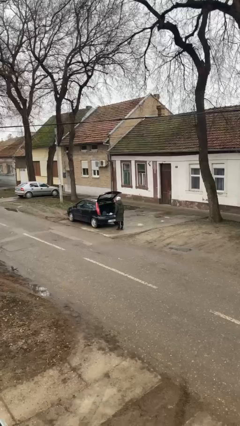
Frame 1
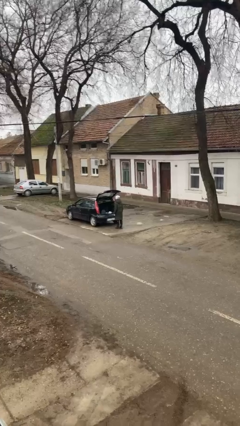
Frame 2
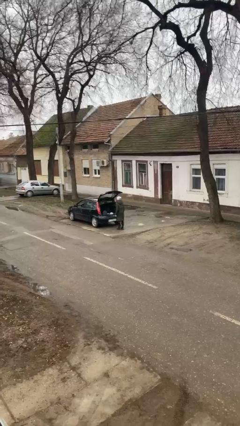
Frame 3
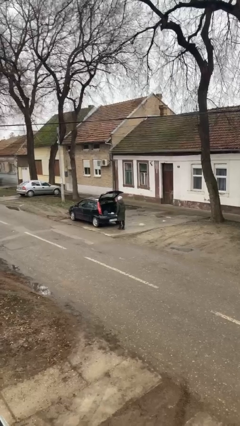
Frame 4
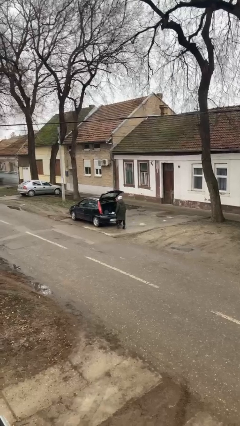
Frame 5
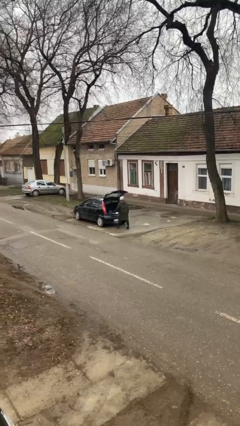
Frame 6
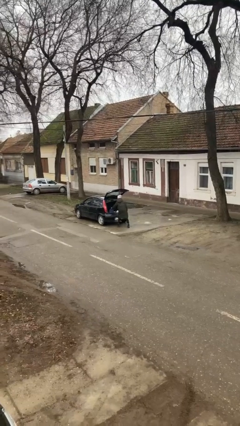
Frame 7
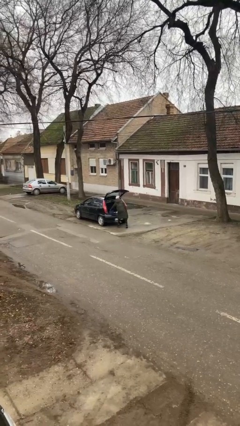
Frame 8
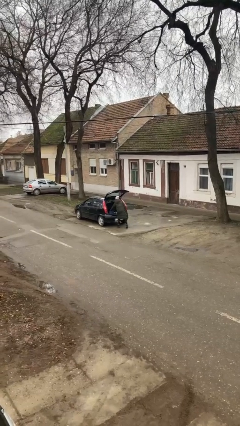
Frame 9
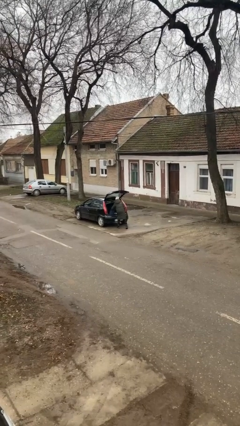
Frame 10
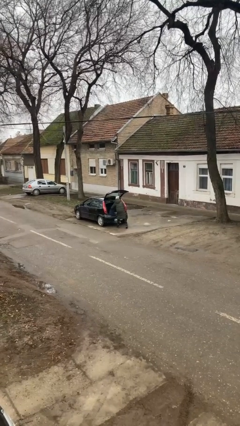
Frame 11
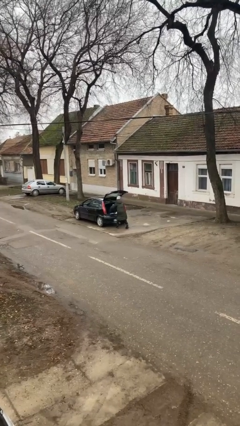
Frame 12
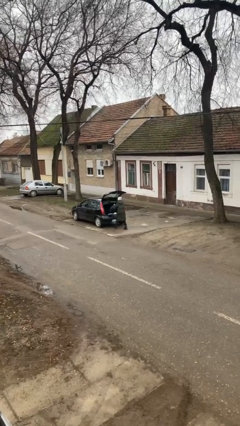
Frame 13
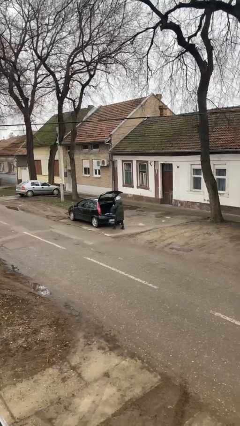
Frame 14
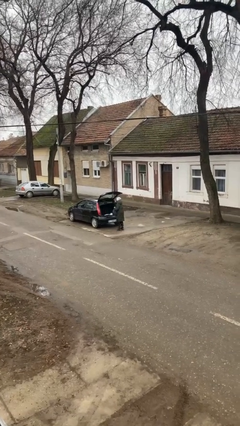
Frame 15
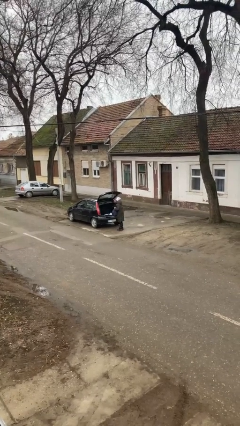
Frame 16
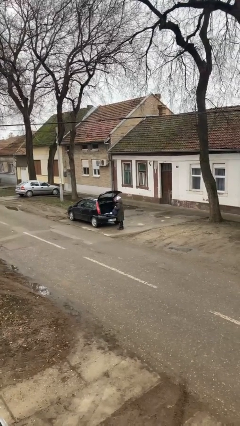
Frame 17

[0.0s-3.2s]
person unloads car

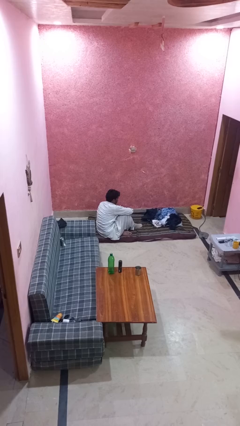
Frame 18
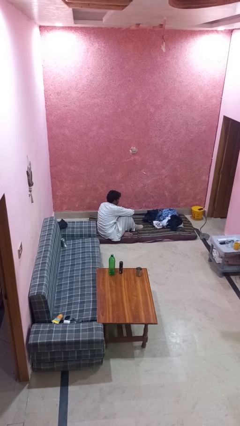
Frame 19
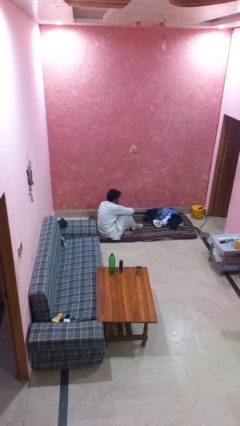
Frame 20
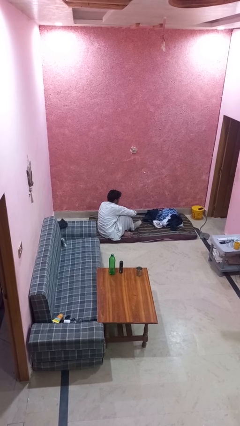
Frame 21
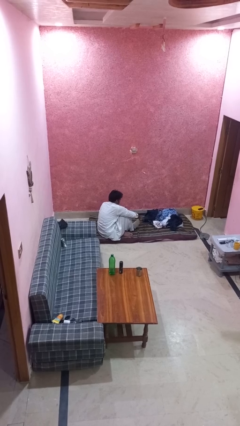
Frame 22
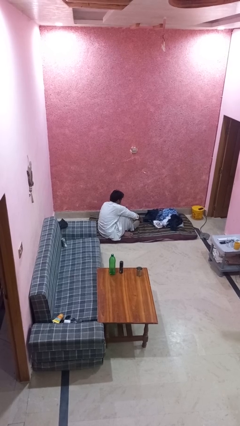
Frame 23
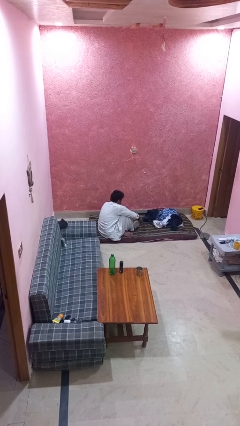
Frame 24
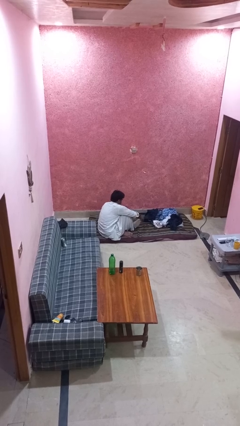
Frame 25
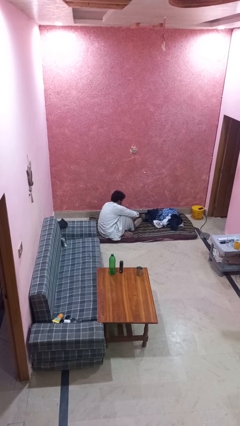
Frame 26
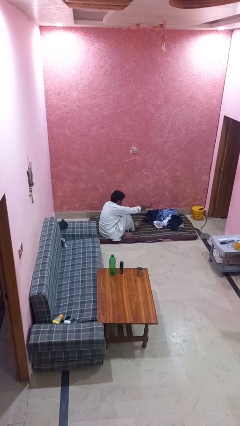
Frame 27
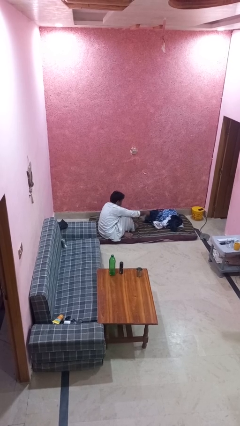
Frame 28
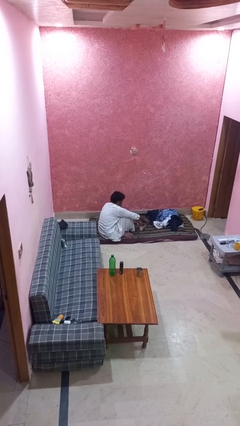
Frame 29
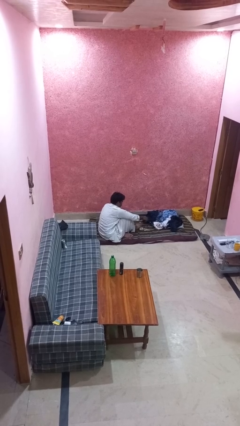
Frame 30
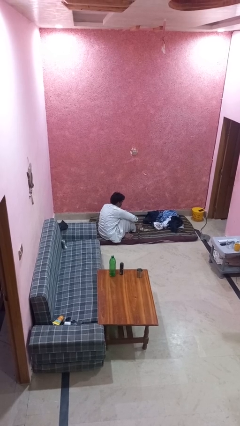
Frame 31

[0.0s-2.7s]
person takes off socks

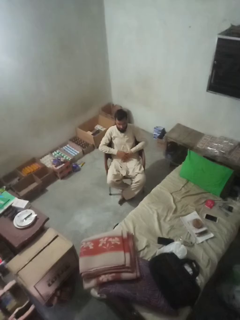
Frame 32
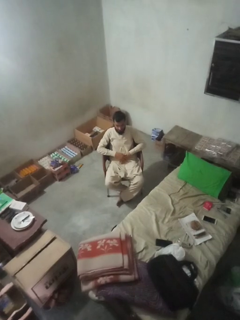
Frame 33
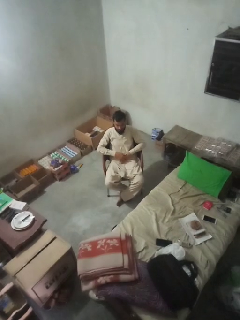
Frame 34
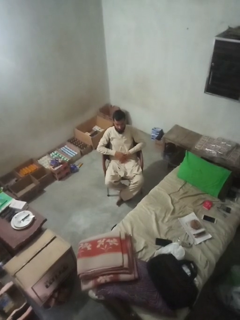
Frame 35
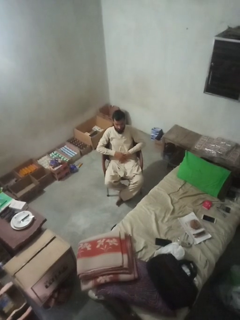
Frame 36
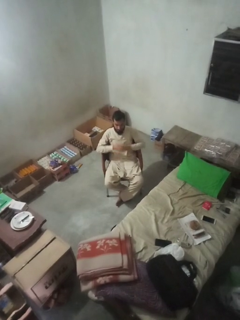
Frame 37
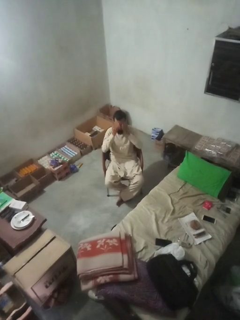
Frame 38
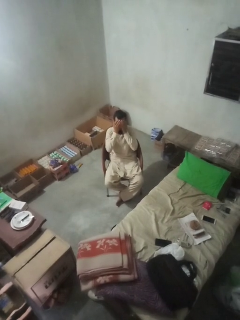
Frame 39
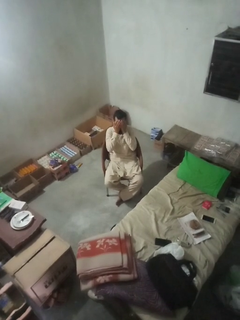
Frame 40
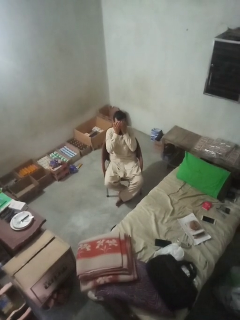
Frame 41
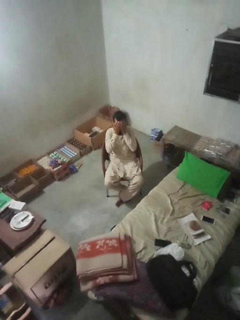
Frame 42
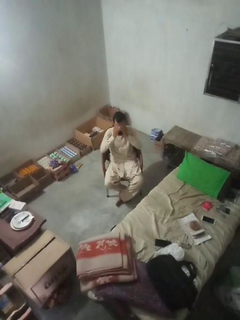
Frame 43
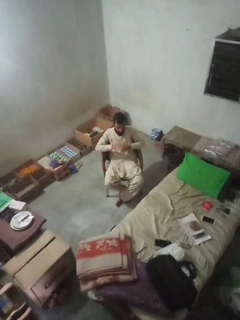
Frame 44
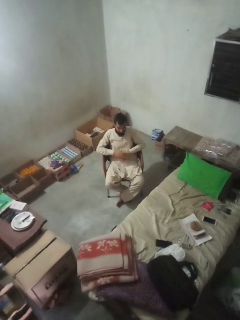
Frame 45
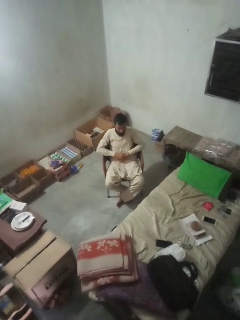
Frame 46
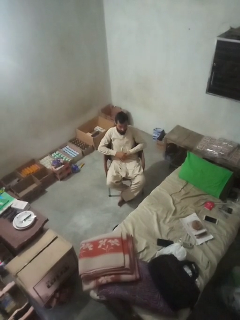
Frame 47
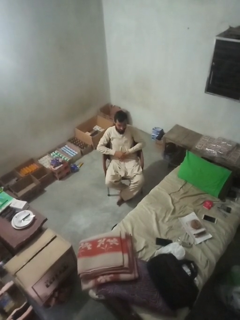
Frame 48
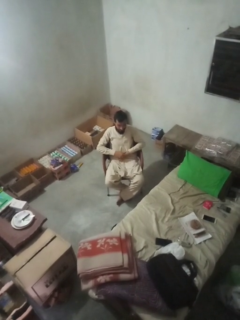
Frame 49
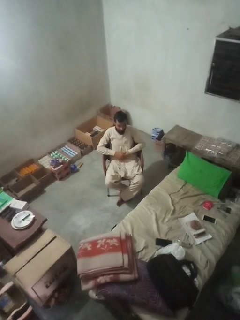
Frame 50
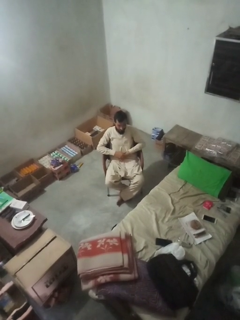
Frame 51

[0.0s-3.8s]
person covers face with hands

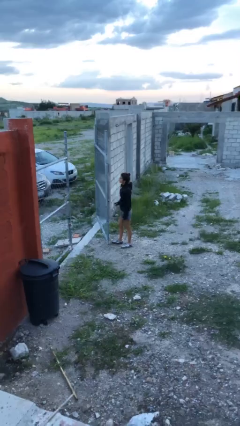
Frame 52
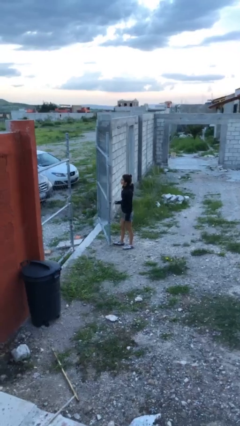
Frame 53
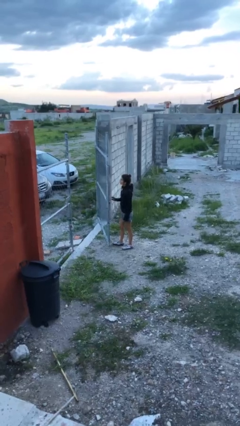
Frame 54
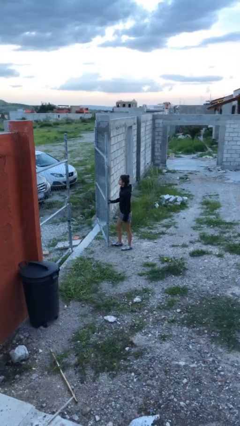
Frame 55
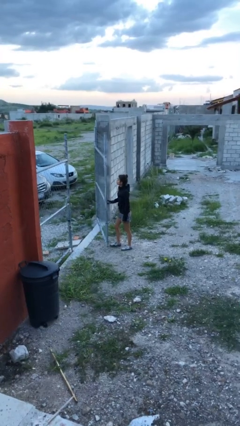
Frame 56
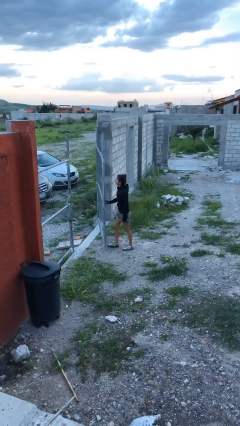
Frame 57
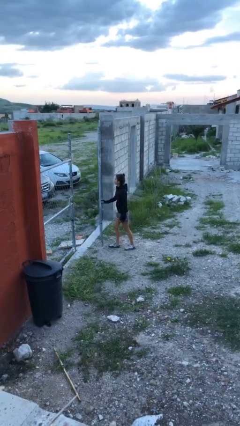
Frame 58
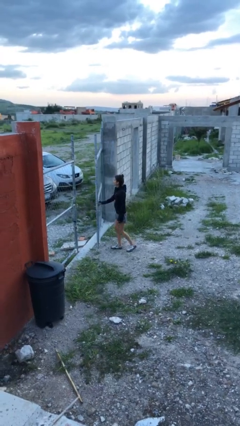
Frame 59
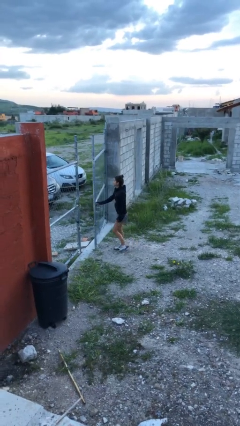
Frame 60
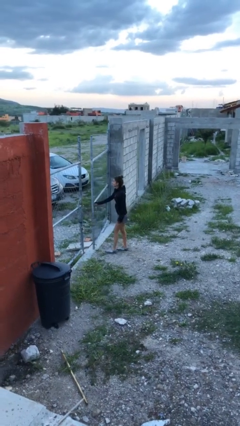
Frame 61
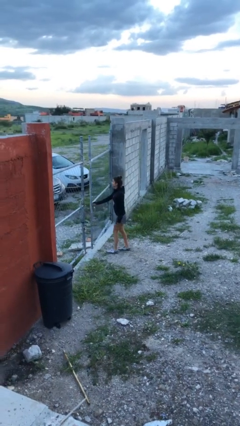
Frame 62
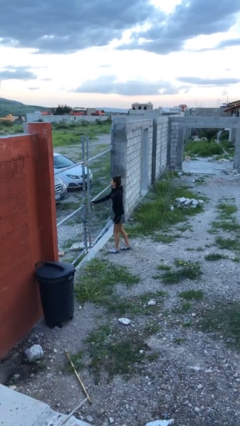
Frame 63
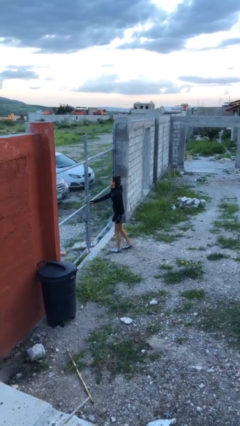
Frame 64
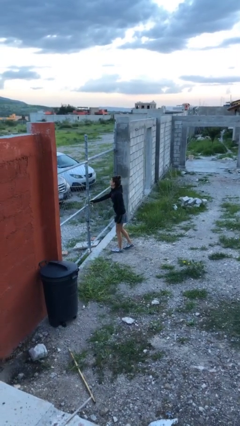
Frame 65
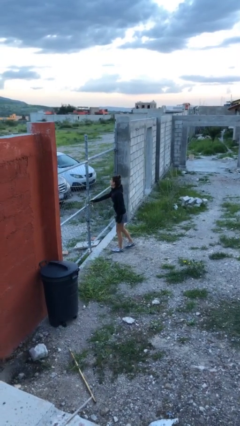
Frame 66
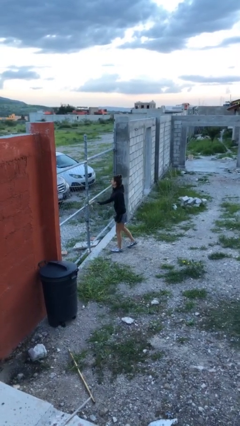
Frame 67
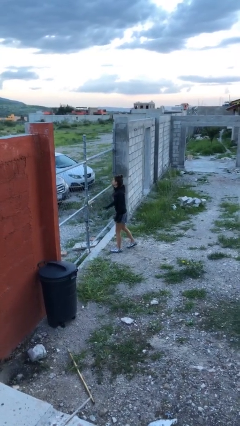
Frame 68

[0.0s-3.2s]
person closes gate

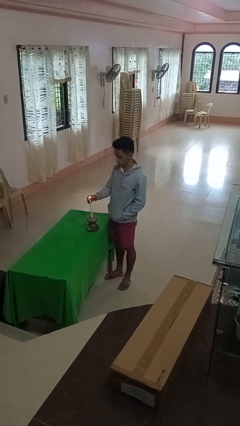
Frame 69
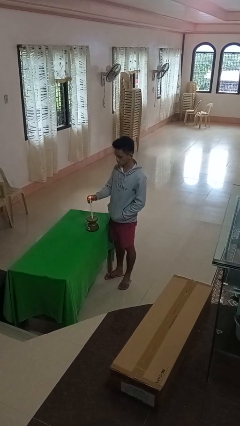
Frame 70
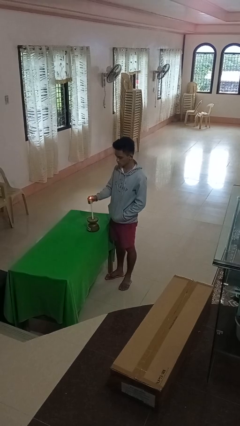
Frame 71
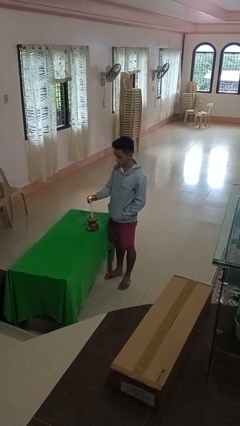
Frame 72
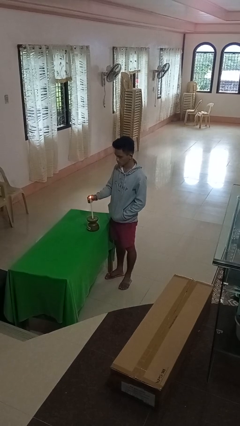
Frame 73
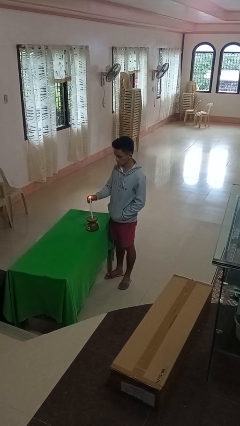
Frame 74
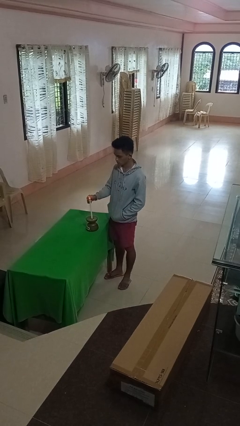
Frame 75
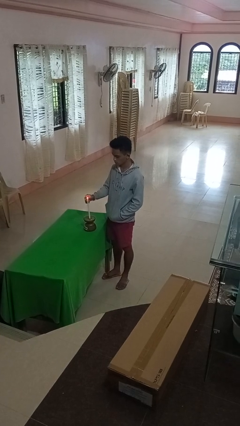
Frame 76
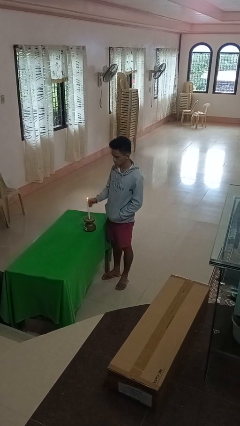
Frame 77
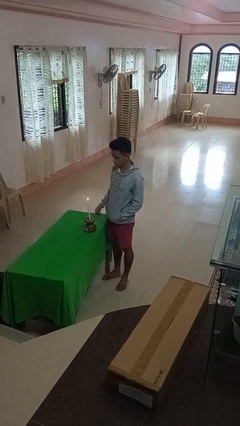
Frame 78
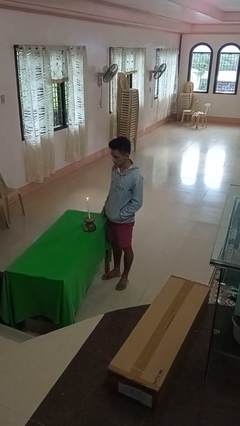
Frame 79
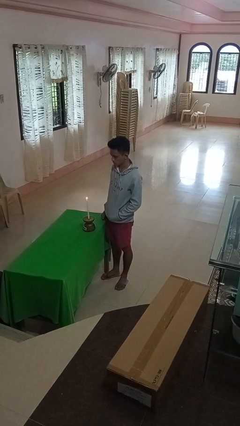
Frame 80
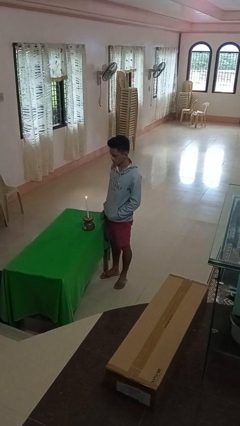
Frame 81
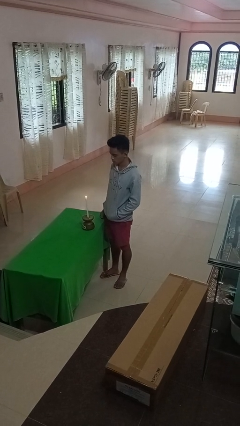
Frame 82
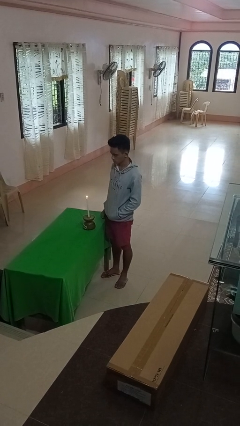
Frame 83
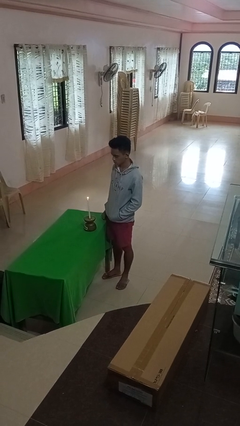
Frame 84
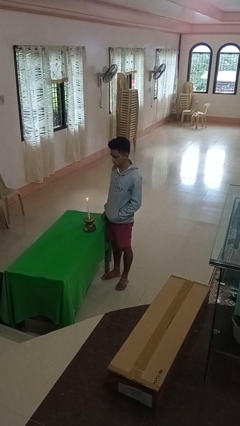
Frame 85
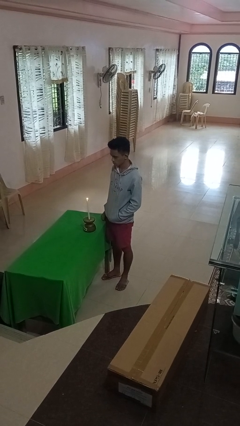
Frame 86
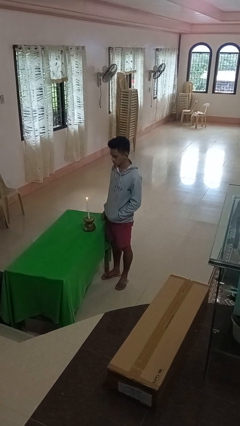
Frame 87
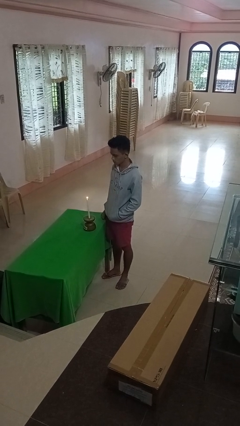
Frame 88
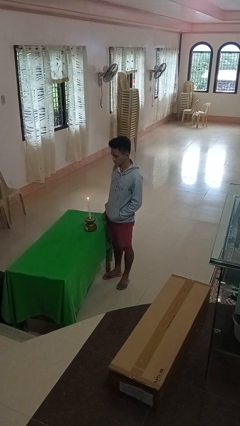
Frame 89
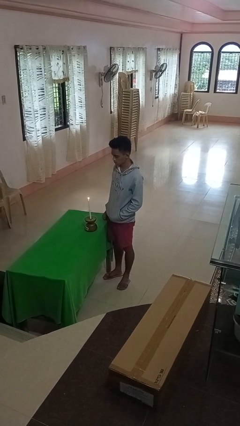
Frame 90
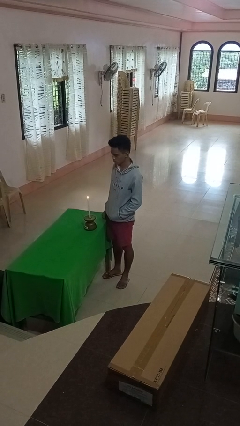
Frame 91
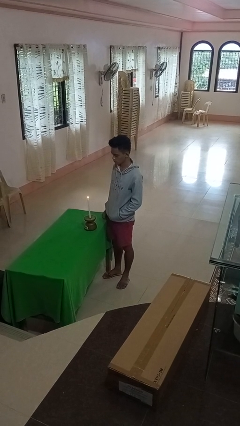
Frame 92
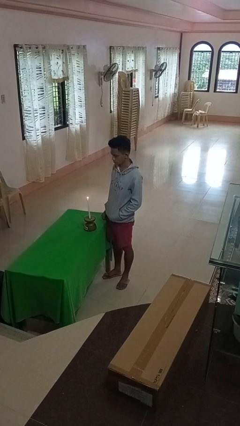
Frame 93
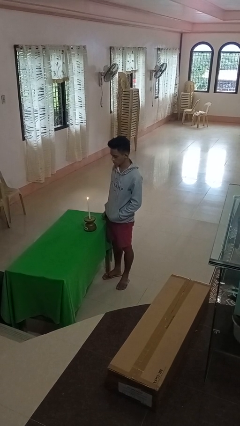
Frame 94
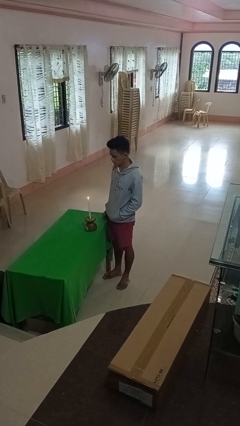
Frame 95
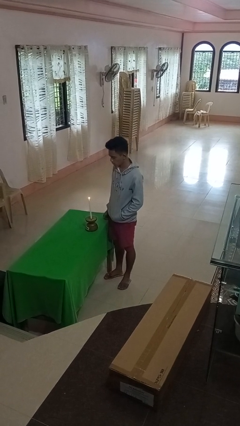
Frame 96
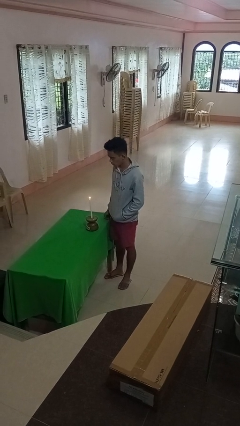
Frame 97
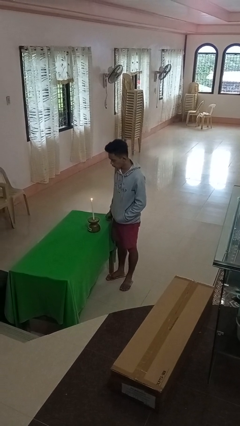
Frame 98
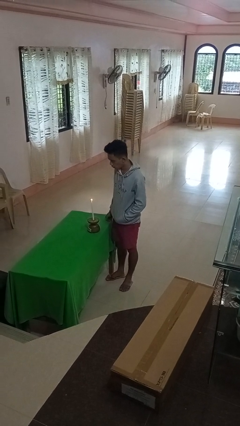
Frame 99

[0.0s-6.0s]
person lights candle
